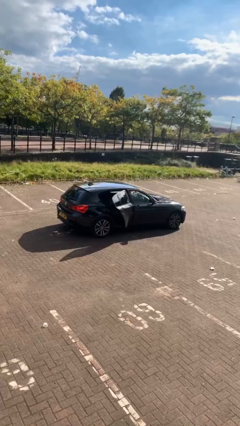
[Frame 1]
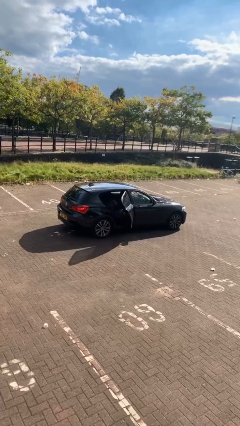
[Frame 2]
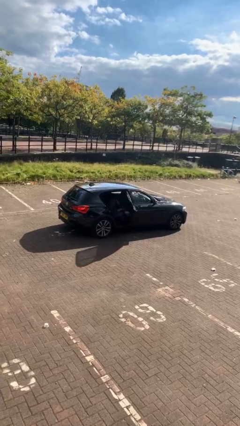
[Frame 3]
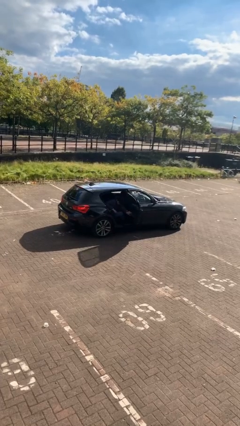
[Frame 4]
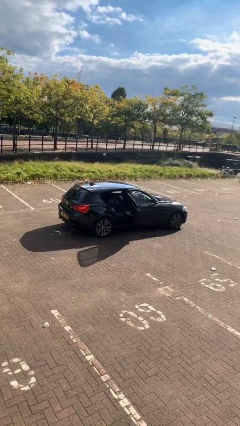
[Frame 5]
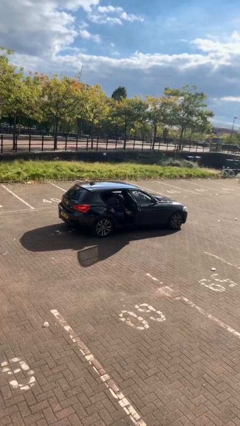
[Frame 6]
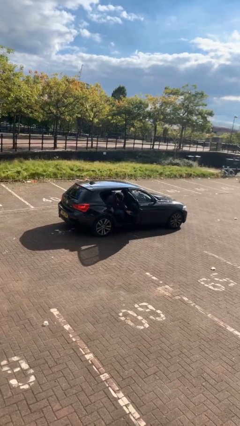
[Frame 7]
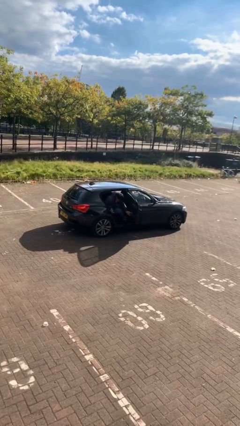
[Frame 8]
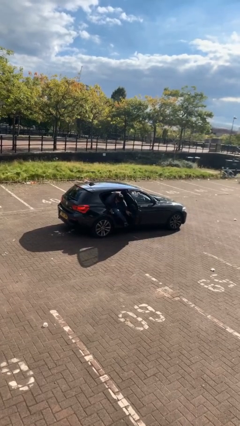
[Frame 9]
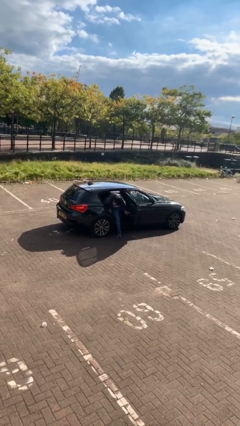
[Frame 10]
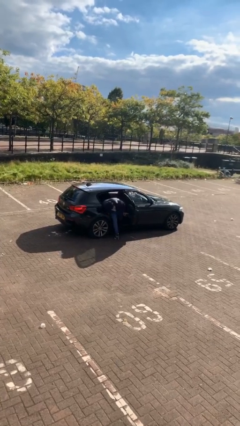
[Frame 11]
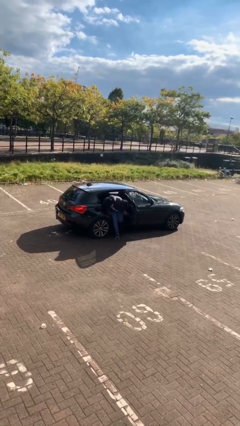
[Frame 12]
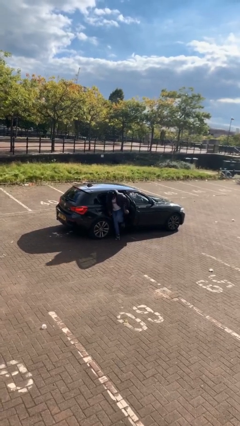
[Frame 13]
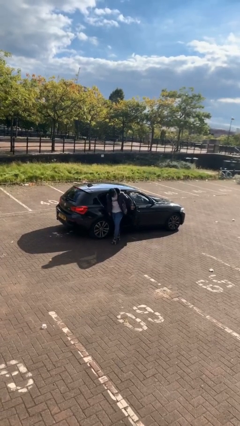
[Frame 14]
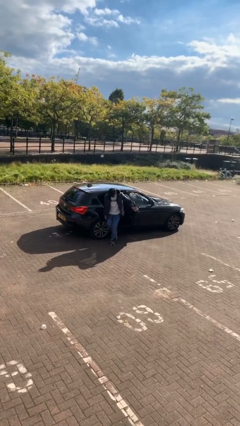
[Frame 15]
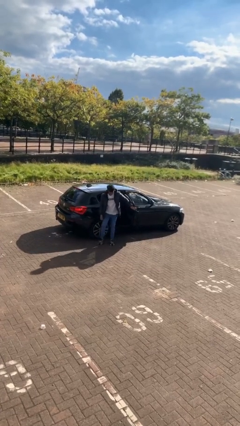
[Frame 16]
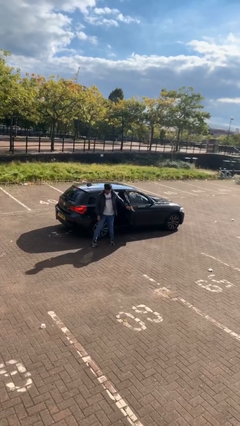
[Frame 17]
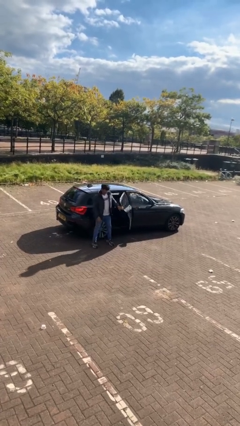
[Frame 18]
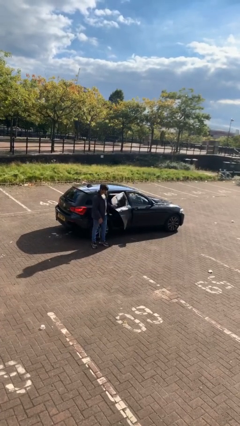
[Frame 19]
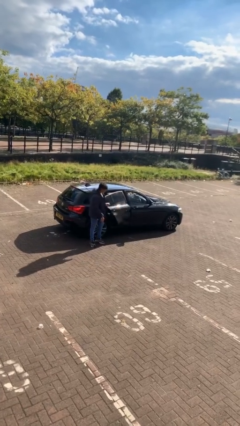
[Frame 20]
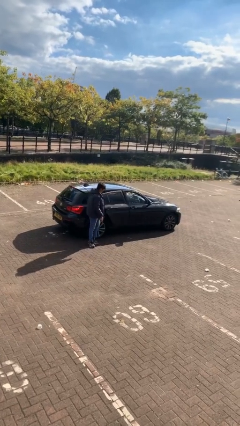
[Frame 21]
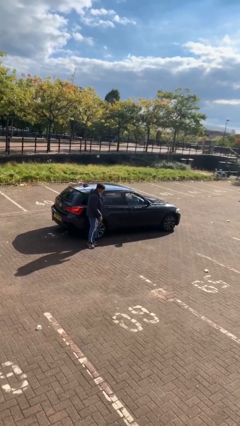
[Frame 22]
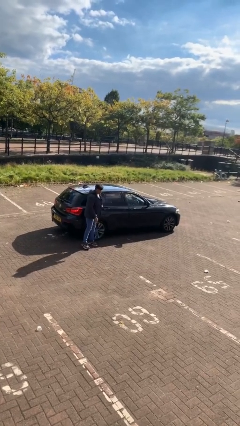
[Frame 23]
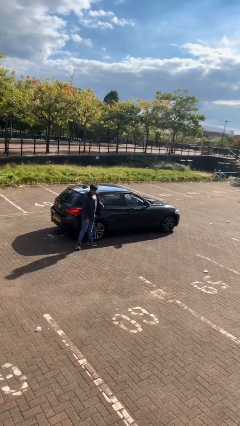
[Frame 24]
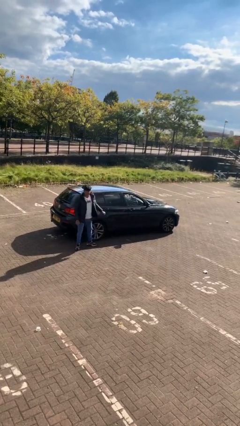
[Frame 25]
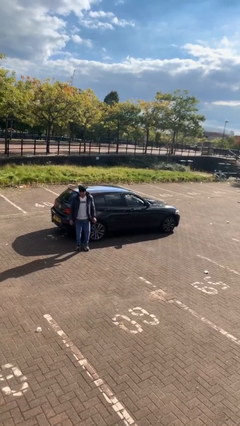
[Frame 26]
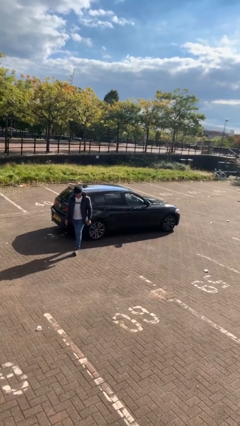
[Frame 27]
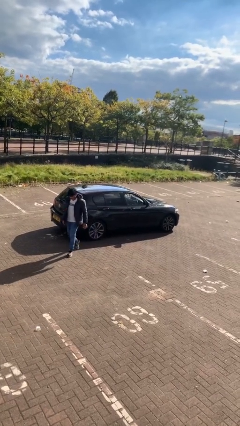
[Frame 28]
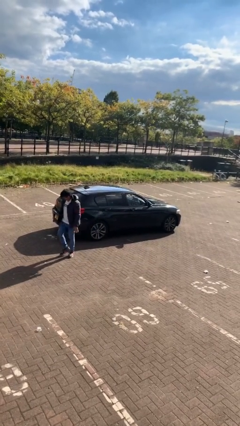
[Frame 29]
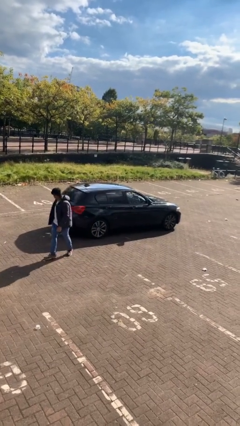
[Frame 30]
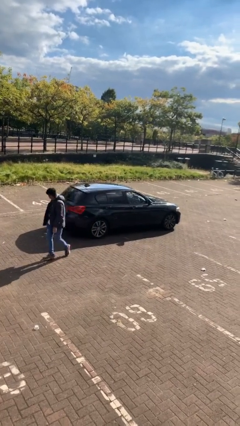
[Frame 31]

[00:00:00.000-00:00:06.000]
car drops off person

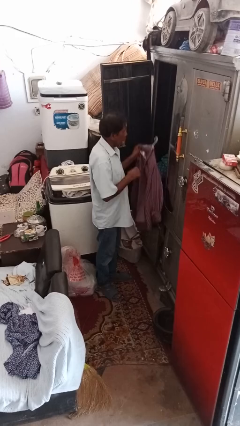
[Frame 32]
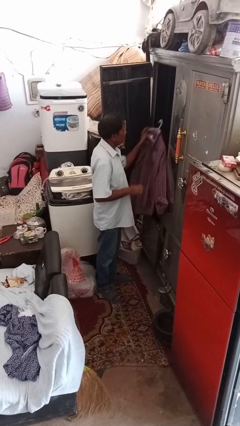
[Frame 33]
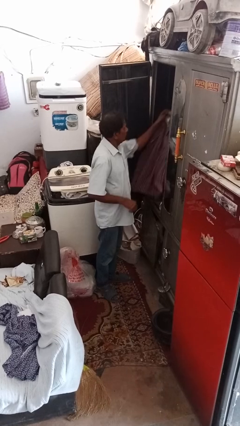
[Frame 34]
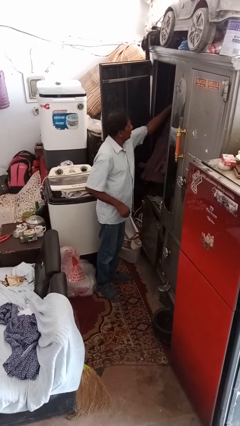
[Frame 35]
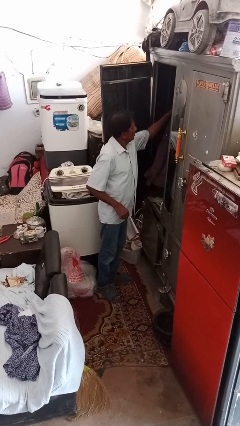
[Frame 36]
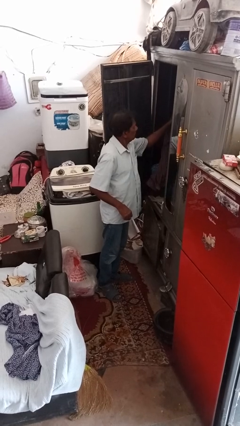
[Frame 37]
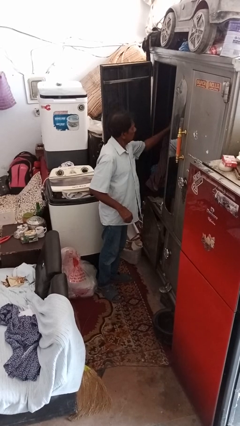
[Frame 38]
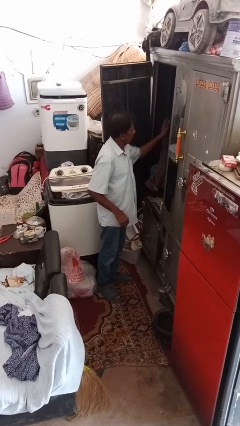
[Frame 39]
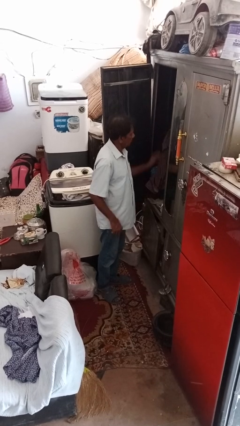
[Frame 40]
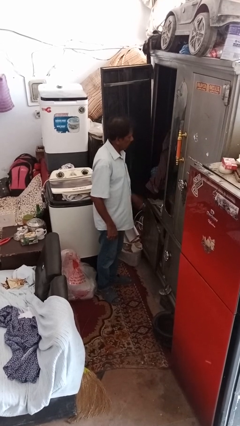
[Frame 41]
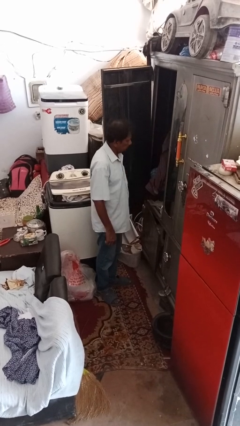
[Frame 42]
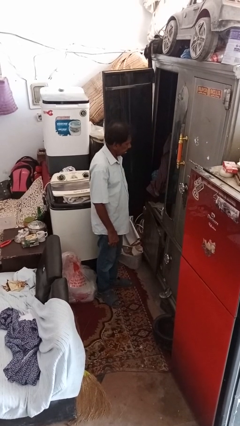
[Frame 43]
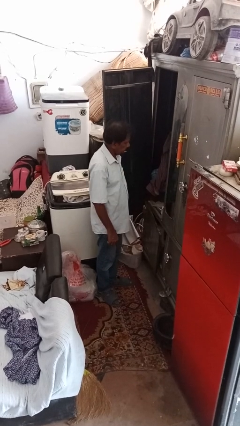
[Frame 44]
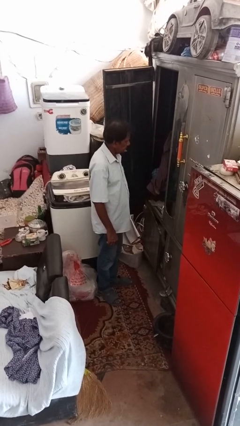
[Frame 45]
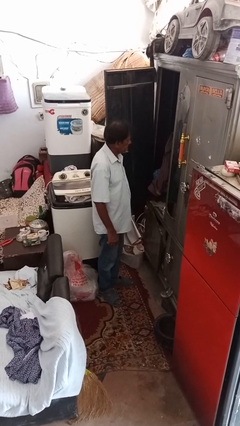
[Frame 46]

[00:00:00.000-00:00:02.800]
person puts clothes into closet

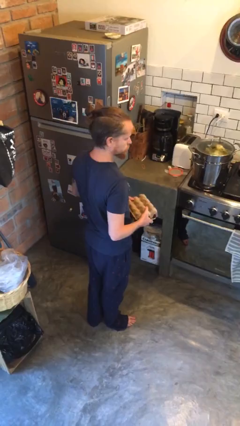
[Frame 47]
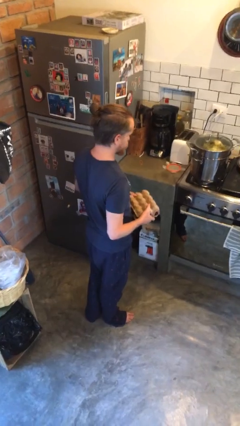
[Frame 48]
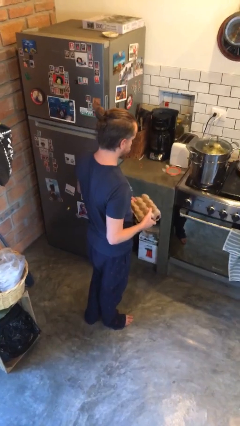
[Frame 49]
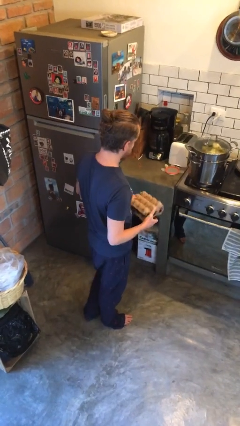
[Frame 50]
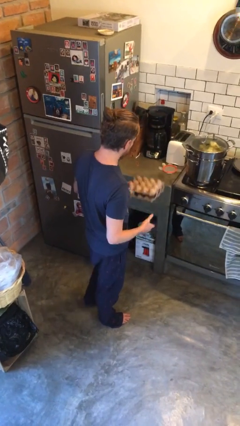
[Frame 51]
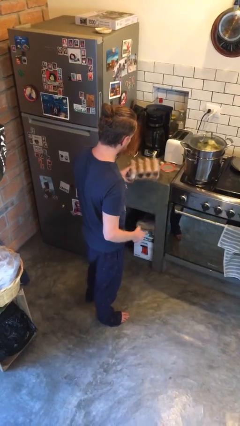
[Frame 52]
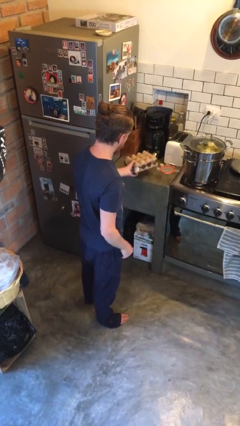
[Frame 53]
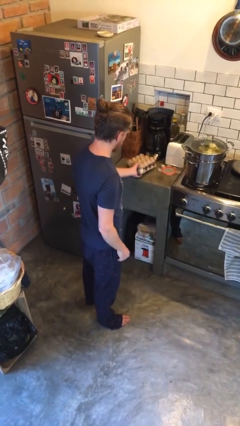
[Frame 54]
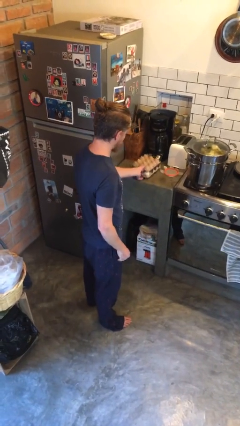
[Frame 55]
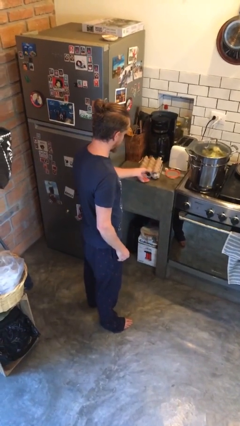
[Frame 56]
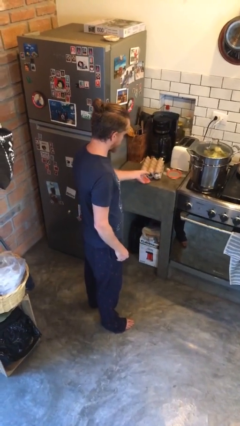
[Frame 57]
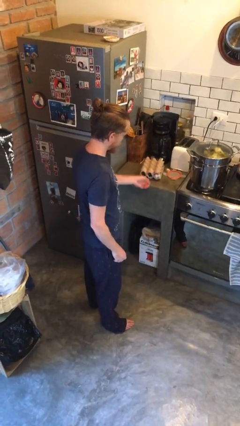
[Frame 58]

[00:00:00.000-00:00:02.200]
person puts down object on countertop

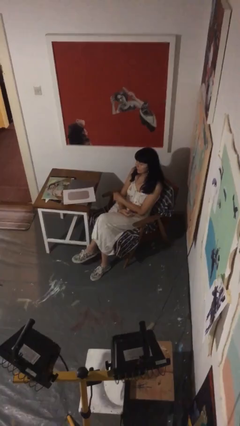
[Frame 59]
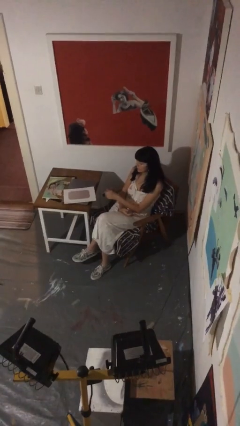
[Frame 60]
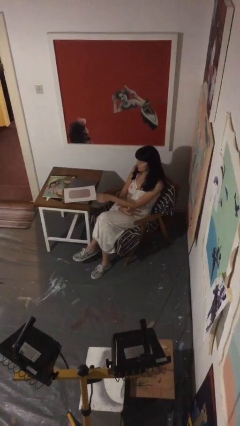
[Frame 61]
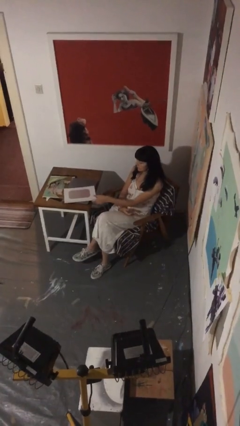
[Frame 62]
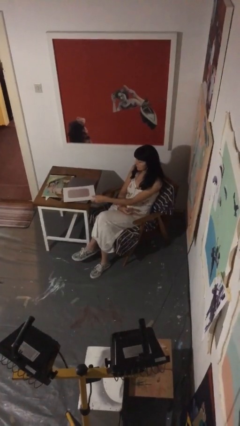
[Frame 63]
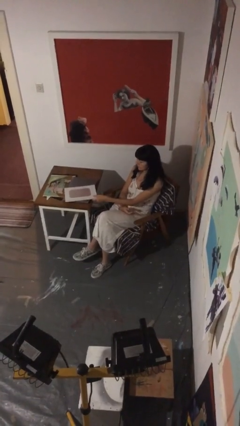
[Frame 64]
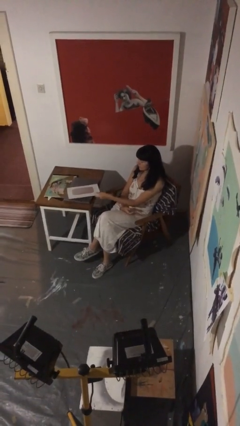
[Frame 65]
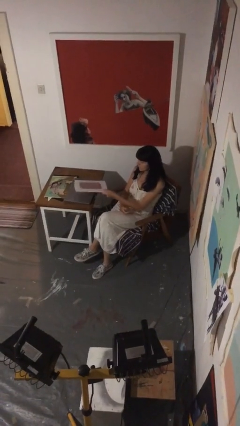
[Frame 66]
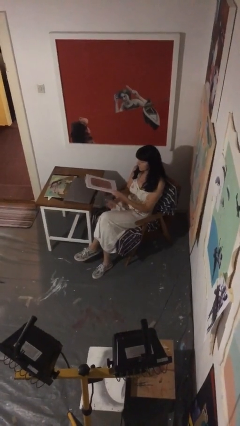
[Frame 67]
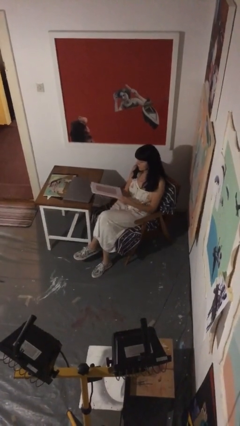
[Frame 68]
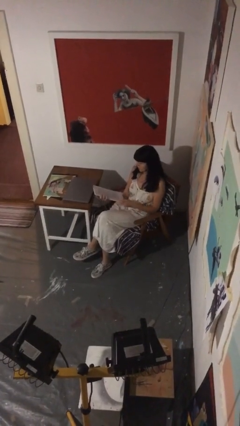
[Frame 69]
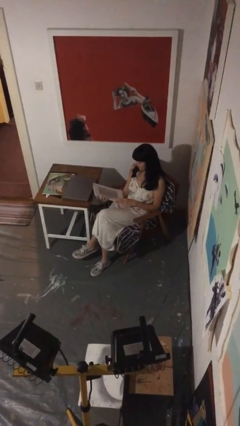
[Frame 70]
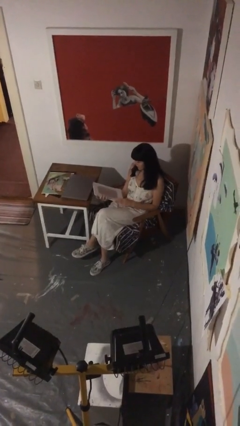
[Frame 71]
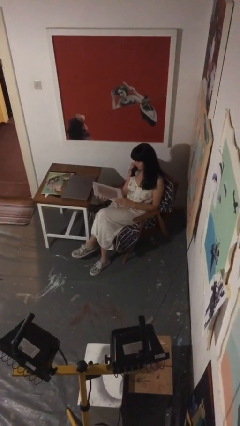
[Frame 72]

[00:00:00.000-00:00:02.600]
person picks up object from table

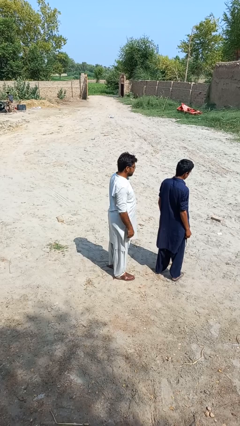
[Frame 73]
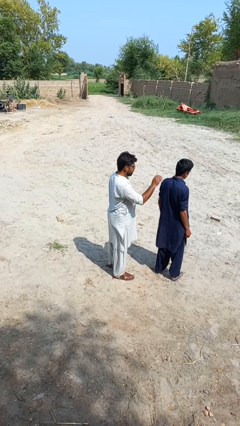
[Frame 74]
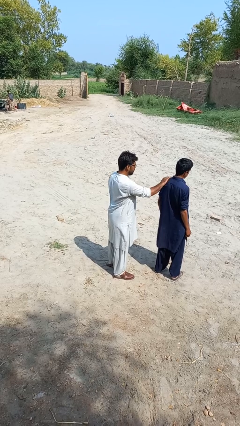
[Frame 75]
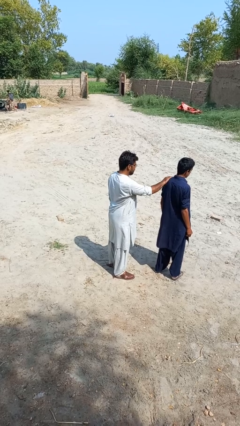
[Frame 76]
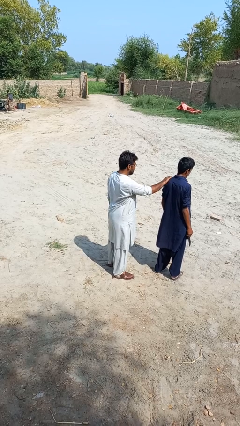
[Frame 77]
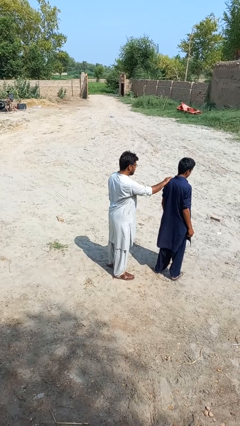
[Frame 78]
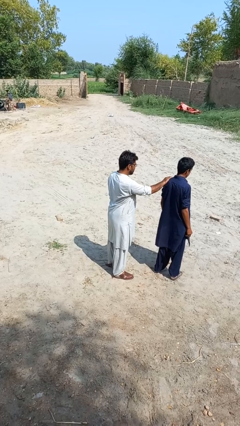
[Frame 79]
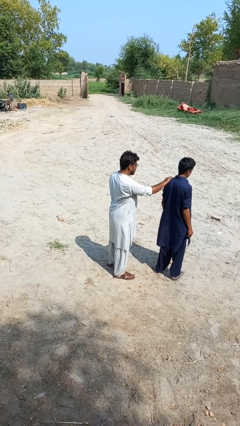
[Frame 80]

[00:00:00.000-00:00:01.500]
person grabs person by shoulder

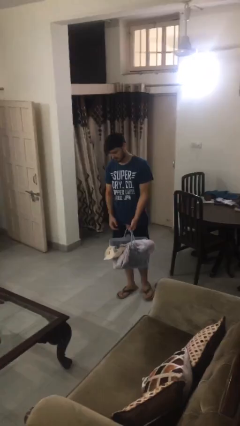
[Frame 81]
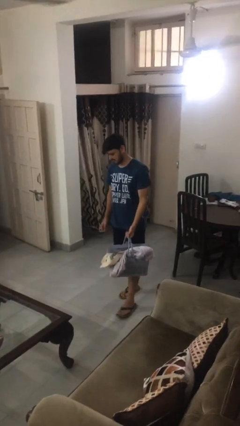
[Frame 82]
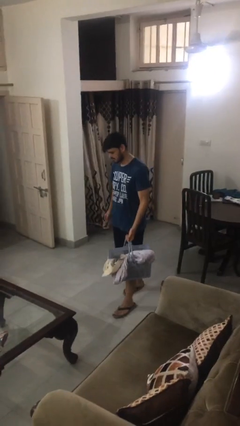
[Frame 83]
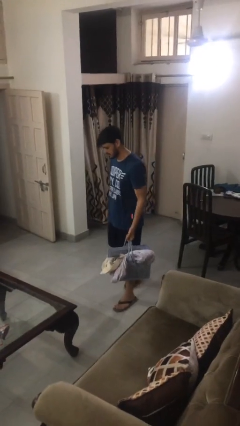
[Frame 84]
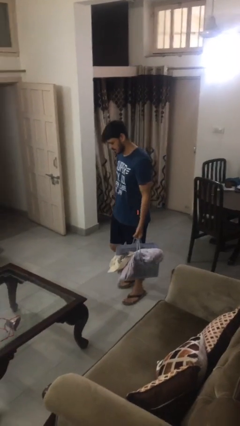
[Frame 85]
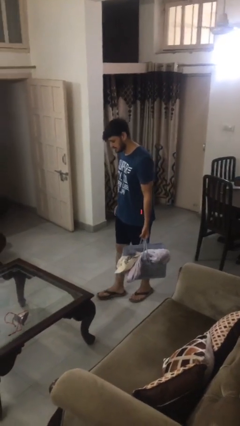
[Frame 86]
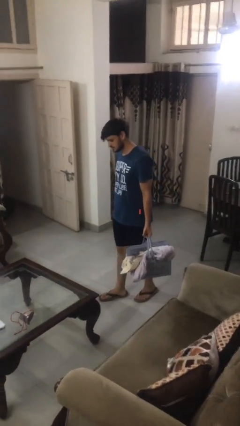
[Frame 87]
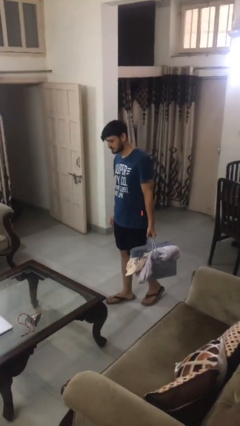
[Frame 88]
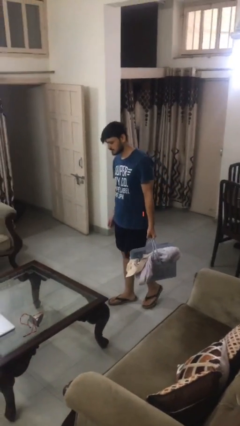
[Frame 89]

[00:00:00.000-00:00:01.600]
person carries laundry basket

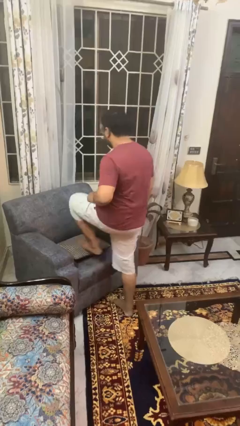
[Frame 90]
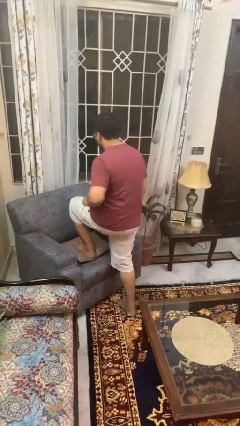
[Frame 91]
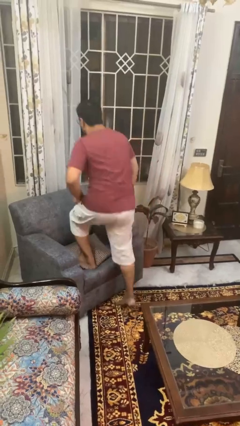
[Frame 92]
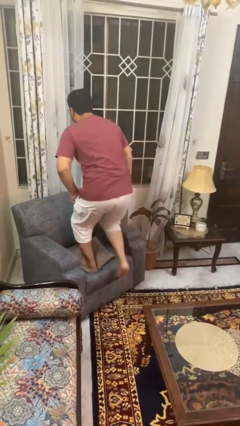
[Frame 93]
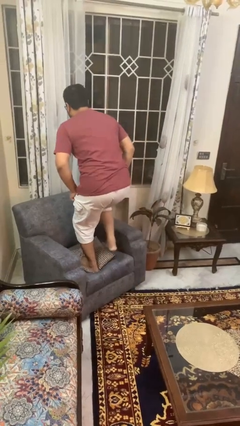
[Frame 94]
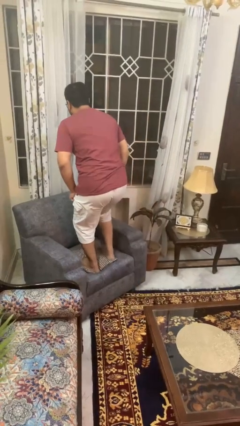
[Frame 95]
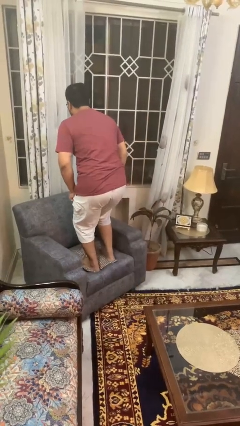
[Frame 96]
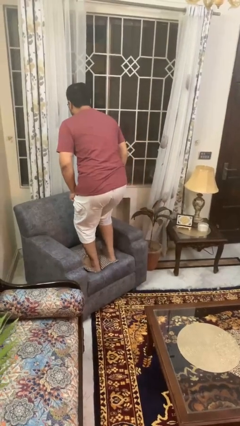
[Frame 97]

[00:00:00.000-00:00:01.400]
person climbs on couch
